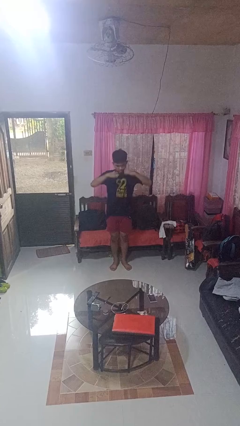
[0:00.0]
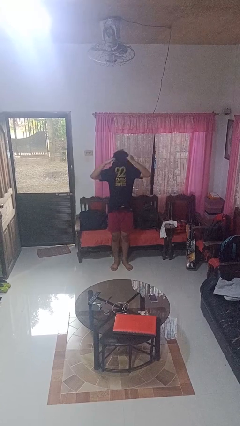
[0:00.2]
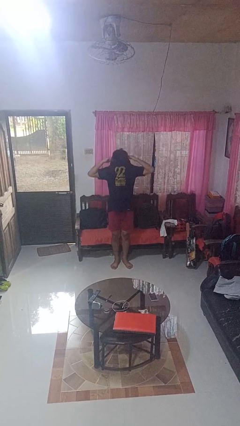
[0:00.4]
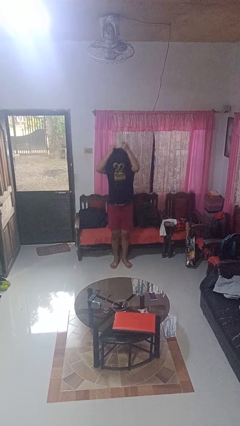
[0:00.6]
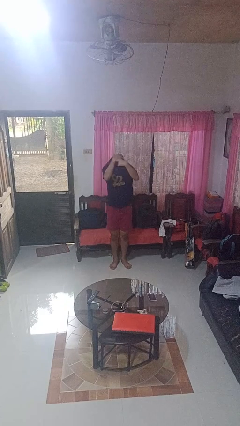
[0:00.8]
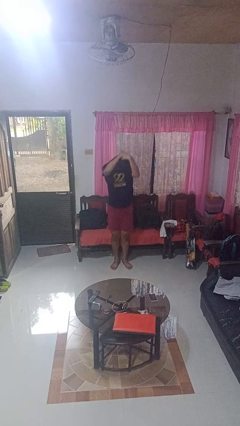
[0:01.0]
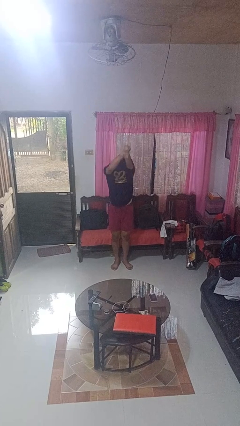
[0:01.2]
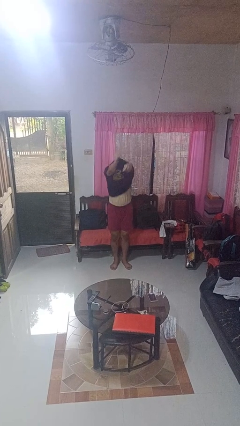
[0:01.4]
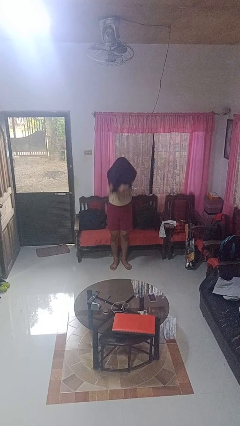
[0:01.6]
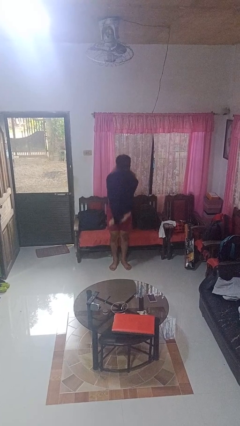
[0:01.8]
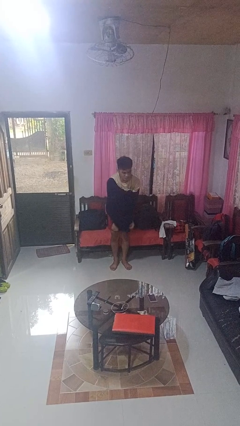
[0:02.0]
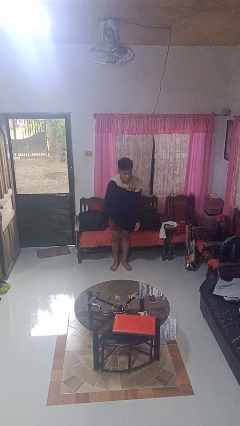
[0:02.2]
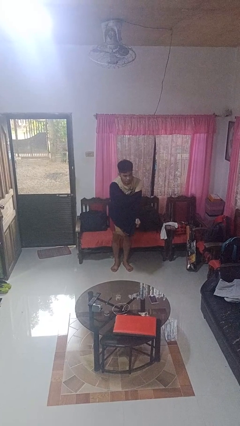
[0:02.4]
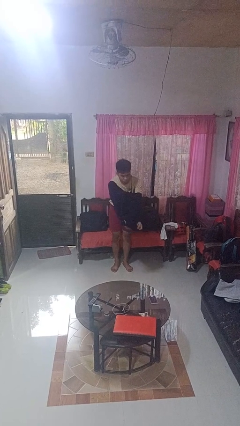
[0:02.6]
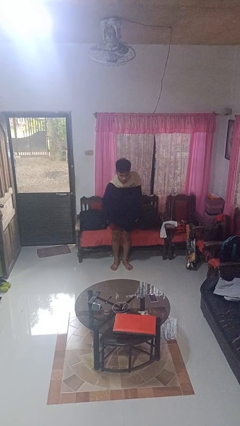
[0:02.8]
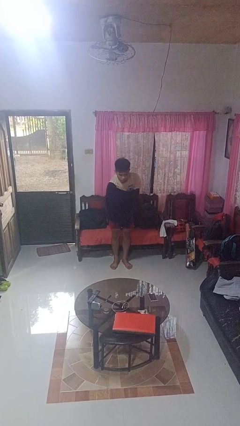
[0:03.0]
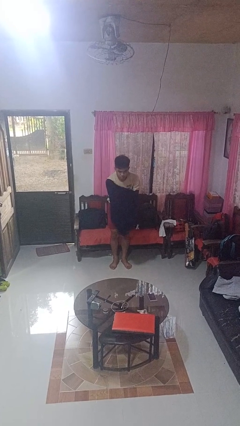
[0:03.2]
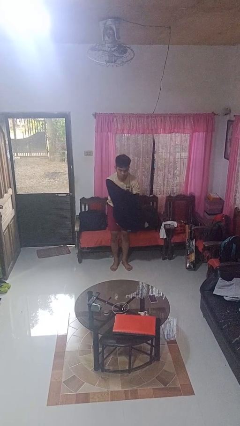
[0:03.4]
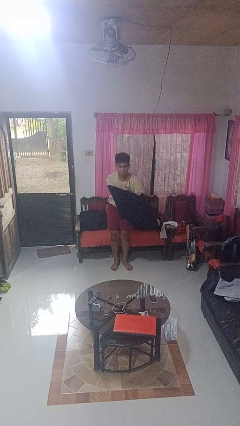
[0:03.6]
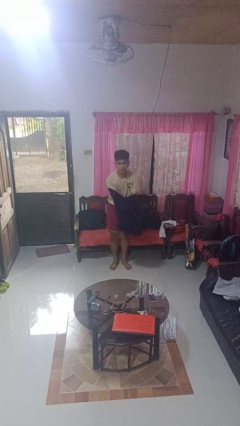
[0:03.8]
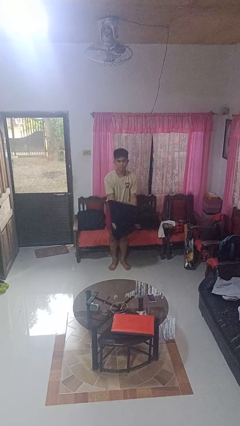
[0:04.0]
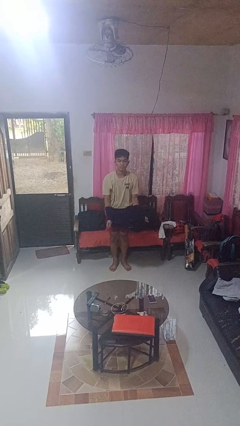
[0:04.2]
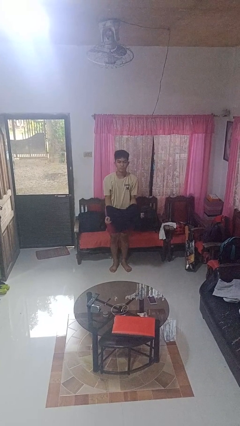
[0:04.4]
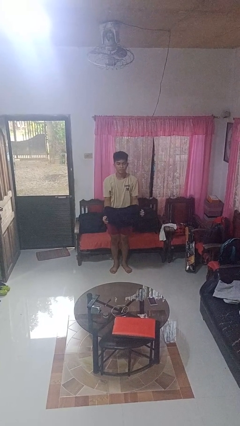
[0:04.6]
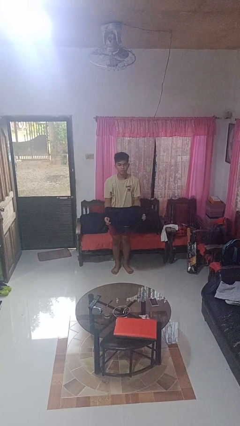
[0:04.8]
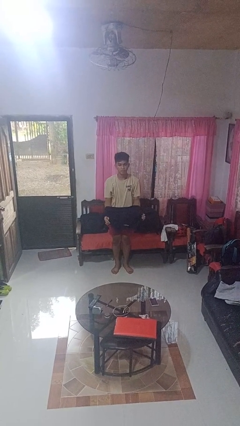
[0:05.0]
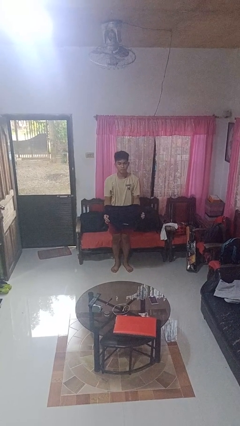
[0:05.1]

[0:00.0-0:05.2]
person takes off shirt

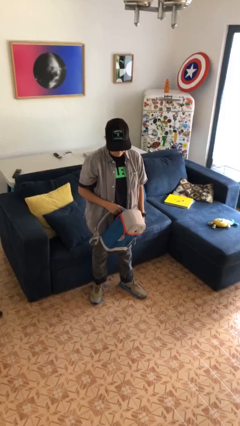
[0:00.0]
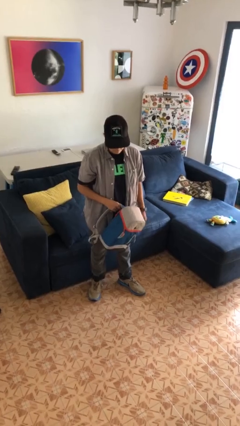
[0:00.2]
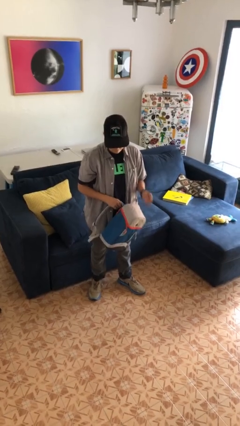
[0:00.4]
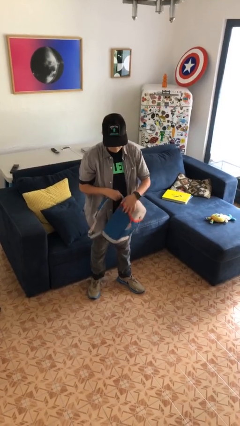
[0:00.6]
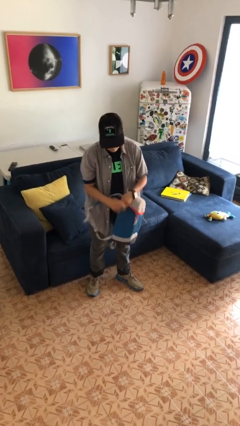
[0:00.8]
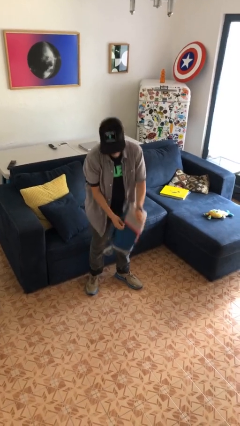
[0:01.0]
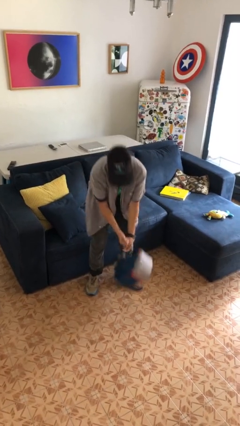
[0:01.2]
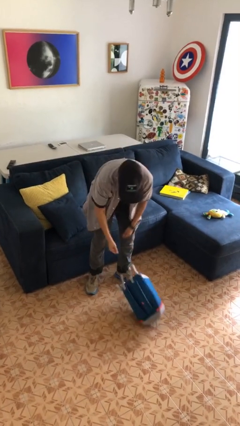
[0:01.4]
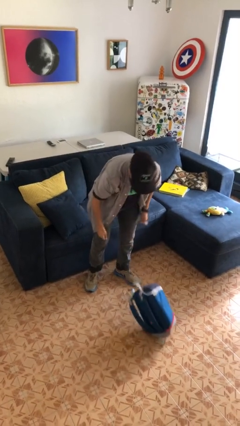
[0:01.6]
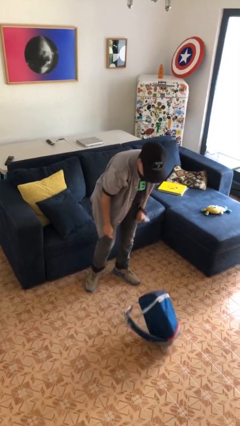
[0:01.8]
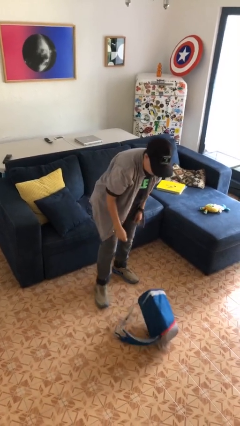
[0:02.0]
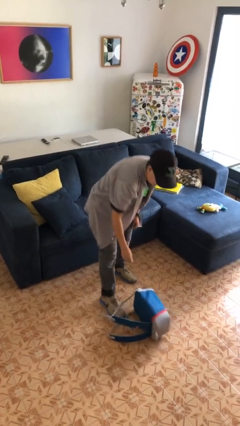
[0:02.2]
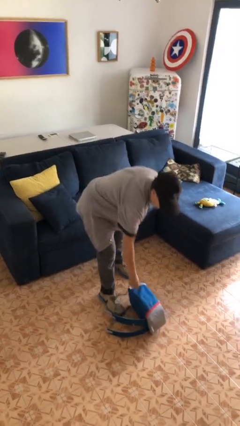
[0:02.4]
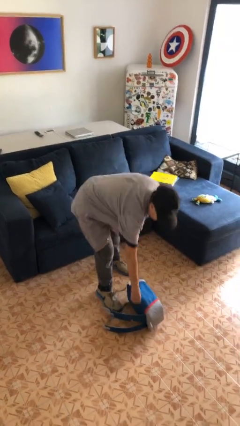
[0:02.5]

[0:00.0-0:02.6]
person drops object

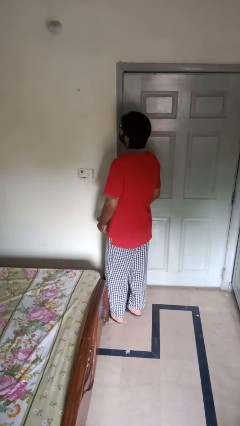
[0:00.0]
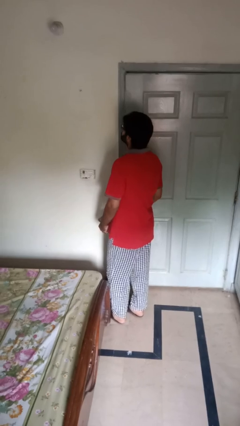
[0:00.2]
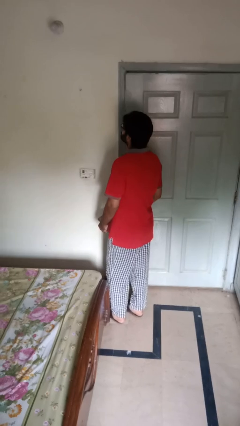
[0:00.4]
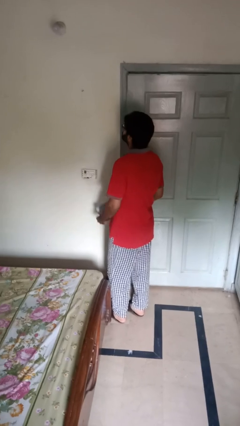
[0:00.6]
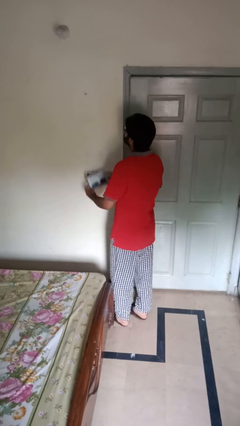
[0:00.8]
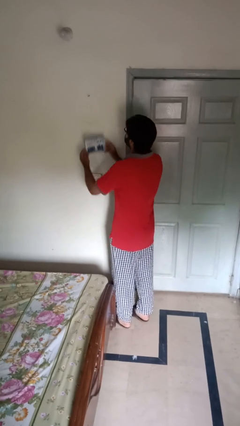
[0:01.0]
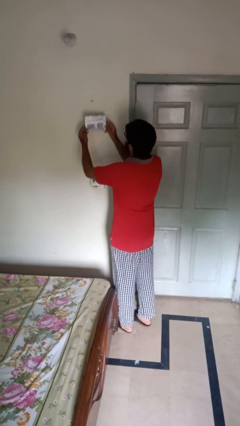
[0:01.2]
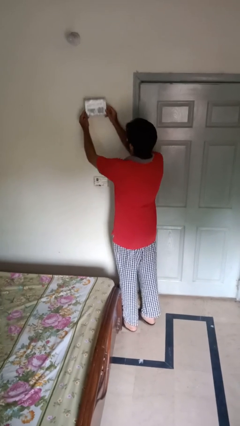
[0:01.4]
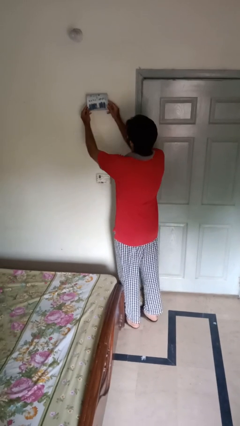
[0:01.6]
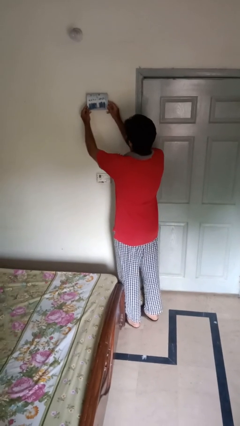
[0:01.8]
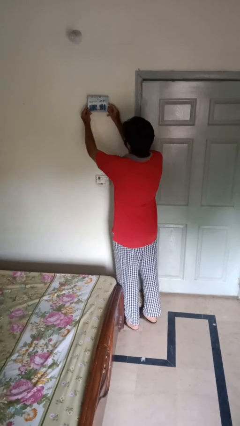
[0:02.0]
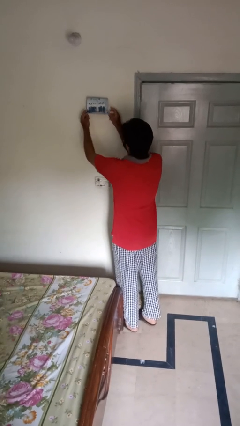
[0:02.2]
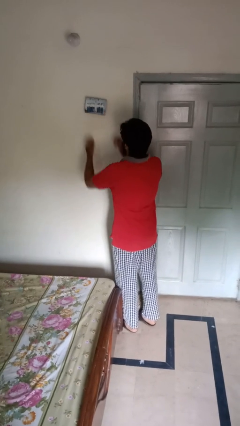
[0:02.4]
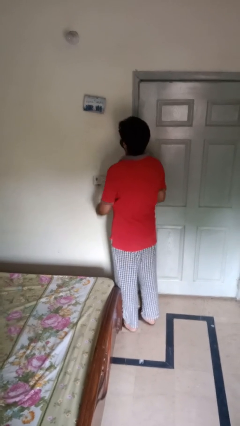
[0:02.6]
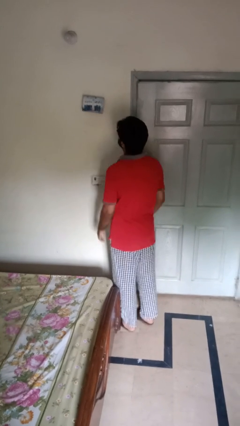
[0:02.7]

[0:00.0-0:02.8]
person puts up picture frame

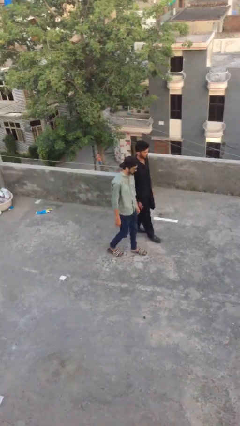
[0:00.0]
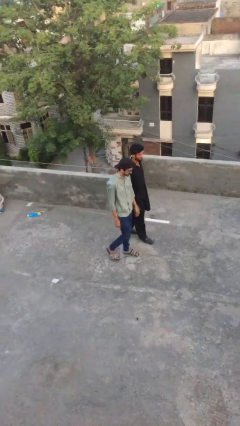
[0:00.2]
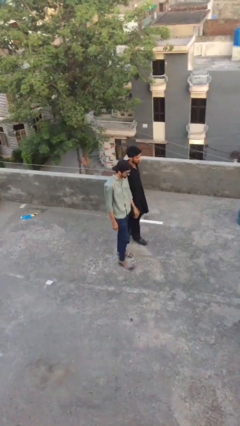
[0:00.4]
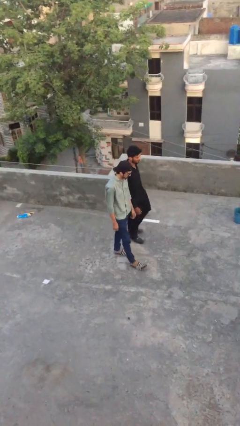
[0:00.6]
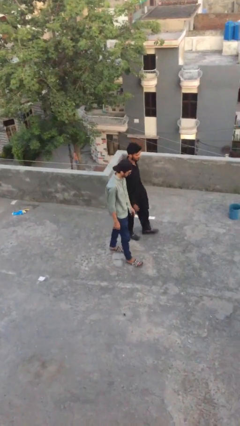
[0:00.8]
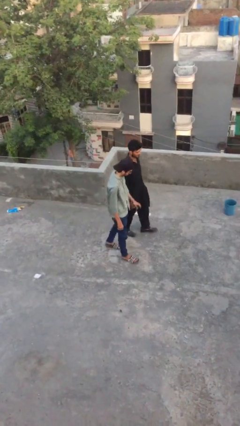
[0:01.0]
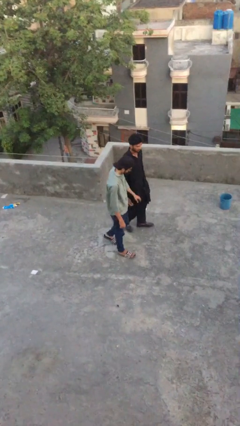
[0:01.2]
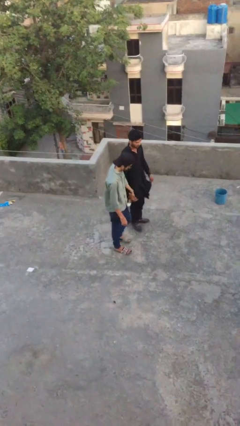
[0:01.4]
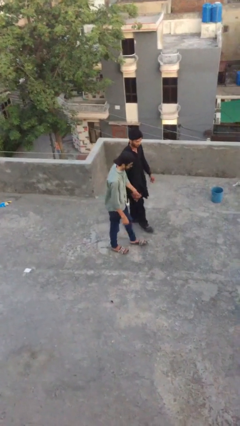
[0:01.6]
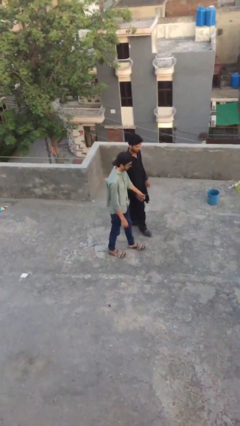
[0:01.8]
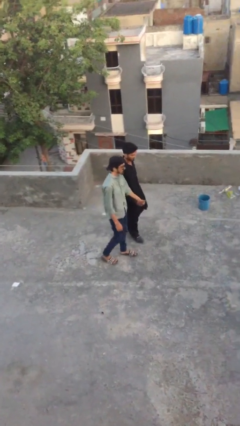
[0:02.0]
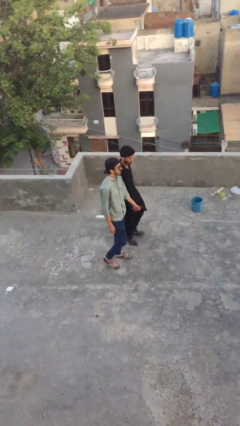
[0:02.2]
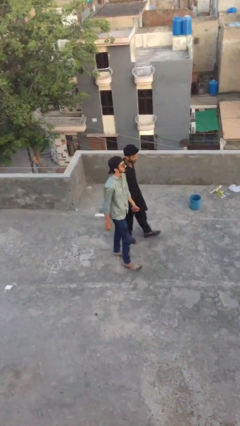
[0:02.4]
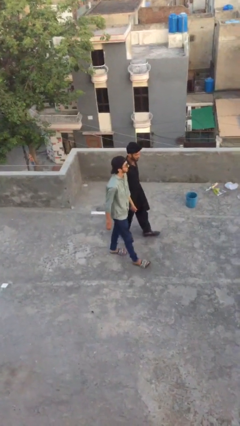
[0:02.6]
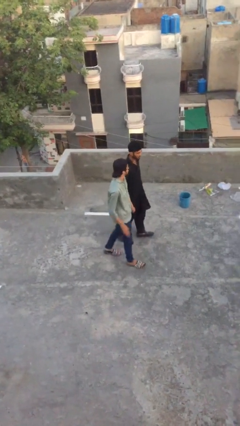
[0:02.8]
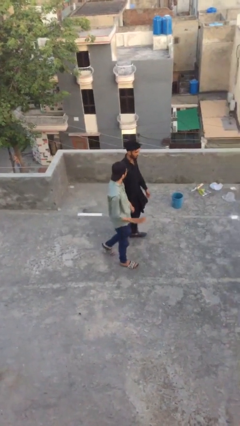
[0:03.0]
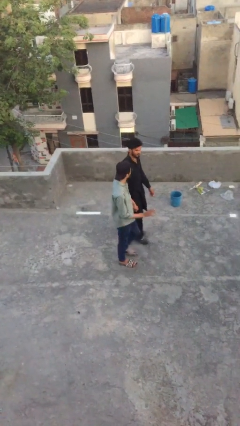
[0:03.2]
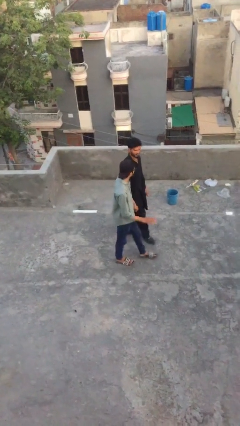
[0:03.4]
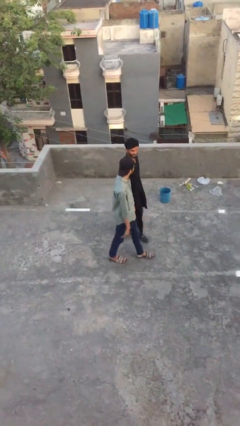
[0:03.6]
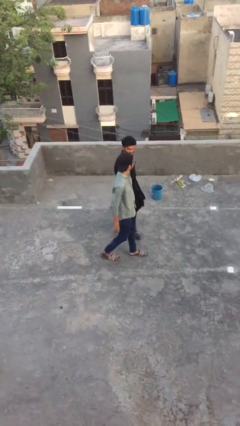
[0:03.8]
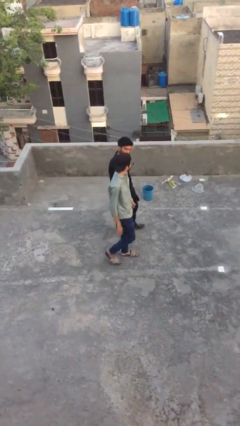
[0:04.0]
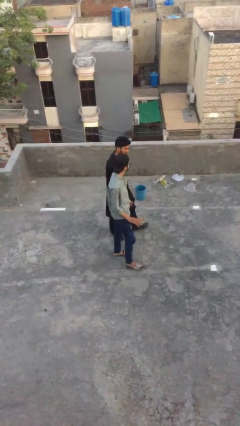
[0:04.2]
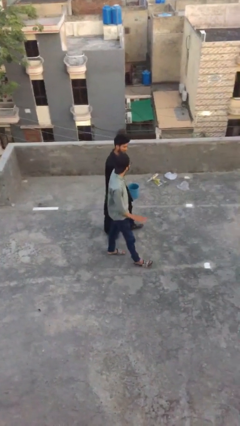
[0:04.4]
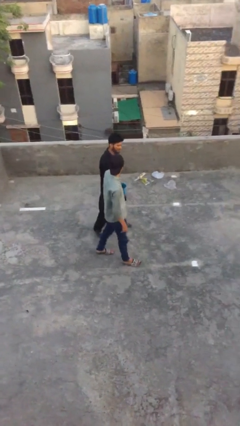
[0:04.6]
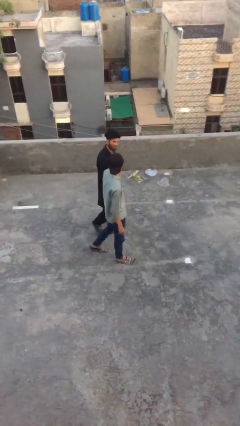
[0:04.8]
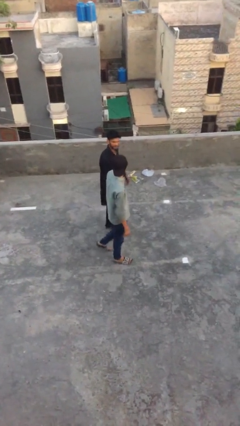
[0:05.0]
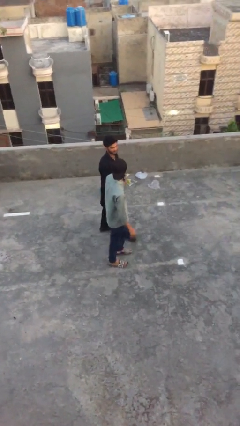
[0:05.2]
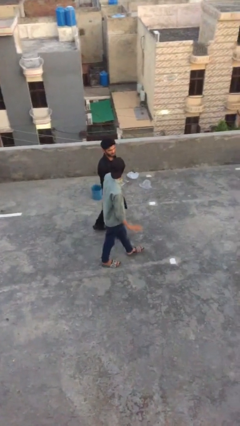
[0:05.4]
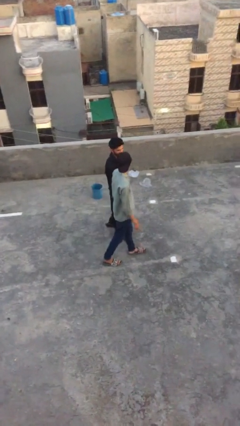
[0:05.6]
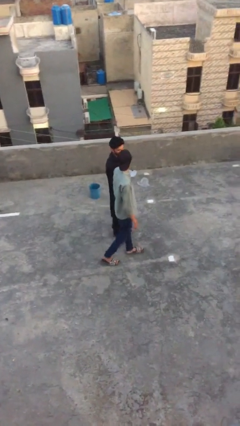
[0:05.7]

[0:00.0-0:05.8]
person holds hand

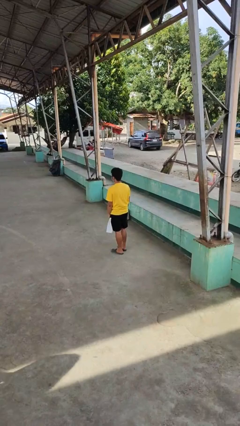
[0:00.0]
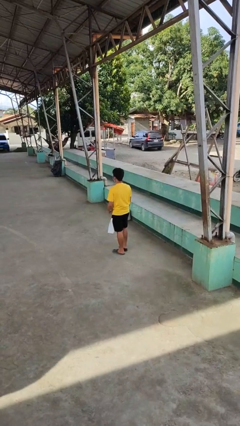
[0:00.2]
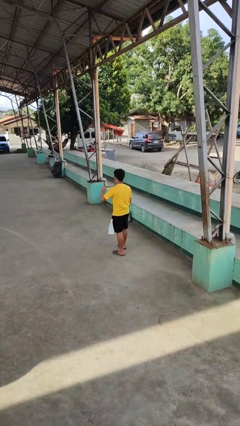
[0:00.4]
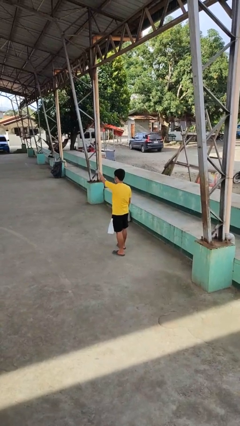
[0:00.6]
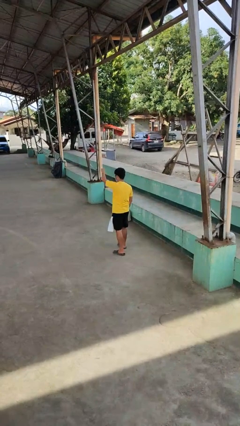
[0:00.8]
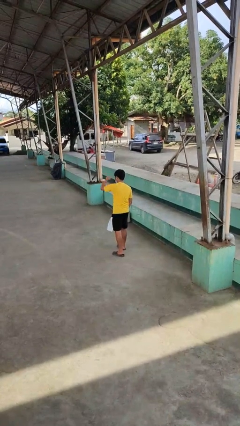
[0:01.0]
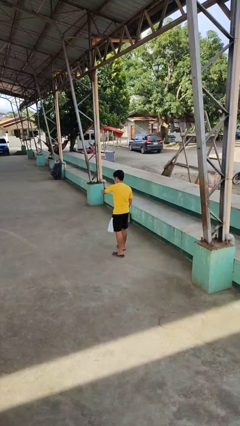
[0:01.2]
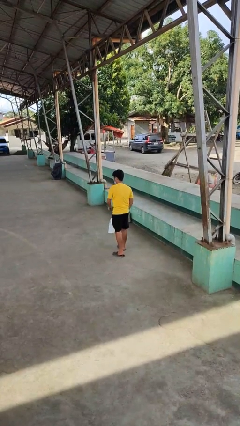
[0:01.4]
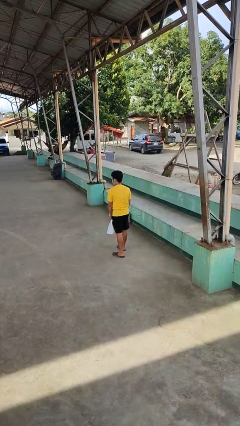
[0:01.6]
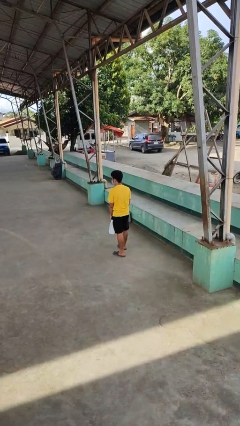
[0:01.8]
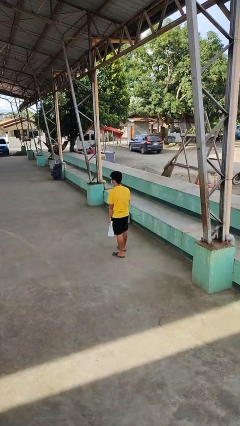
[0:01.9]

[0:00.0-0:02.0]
person punches
